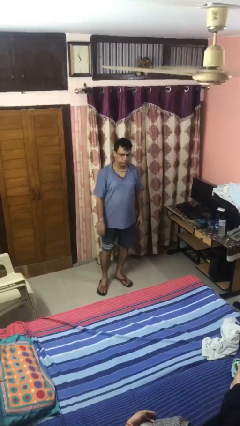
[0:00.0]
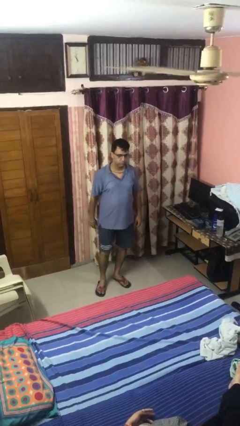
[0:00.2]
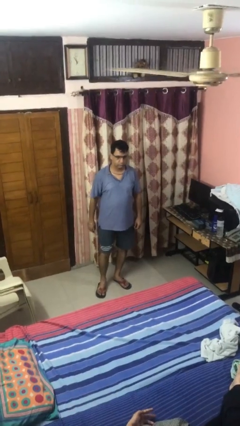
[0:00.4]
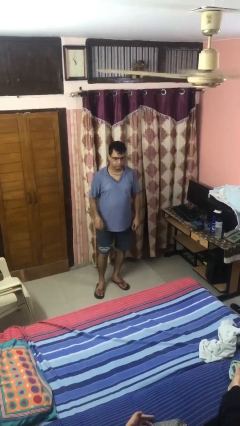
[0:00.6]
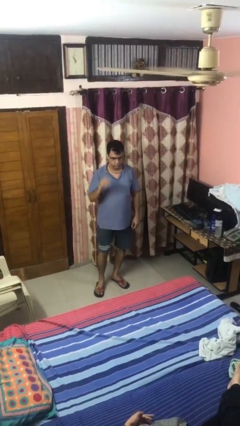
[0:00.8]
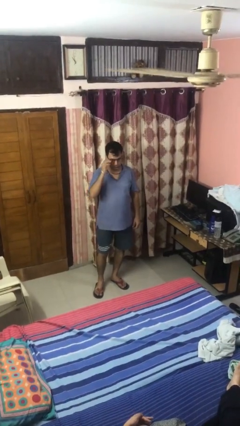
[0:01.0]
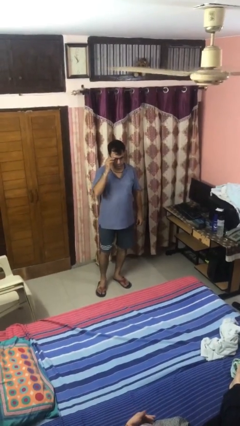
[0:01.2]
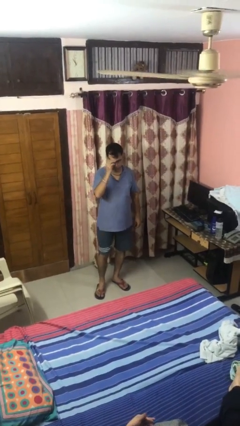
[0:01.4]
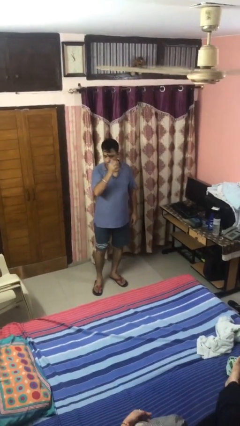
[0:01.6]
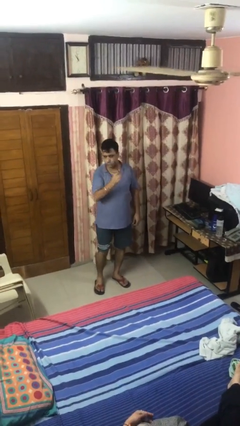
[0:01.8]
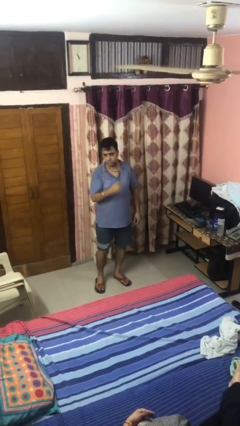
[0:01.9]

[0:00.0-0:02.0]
person takes off glasses

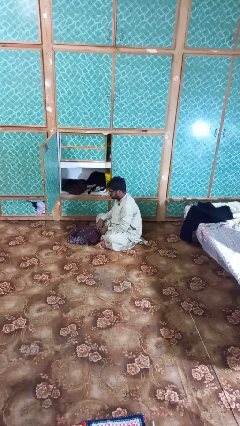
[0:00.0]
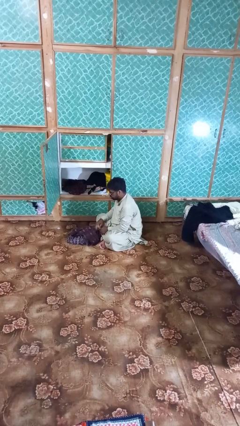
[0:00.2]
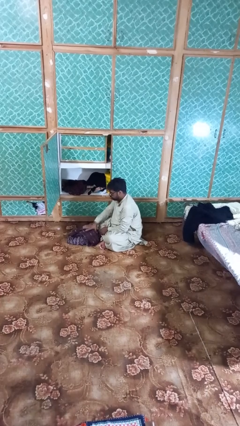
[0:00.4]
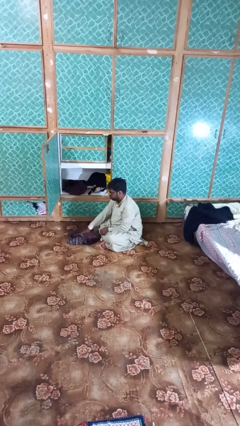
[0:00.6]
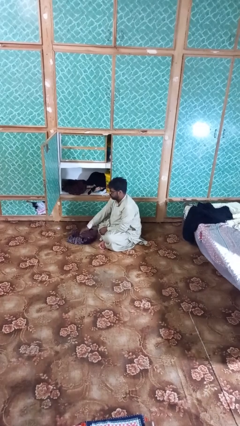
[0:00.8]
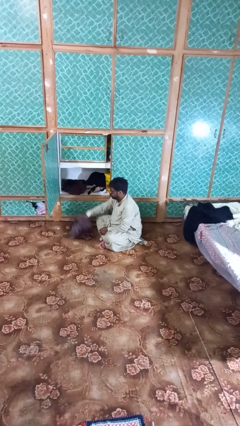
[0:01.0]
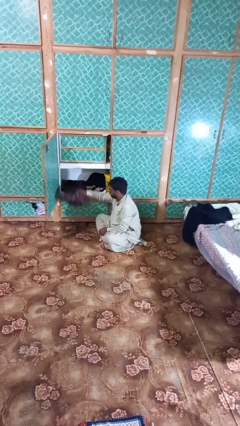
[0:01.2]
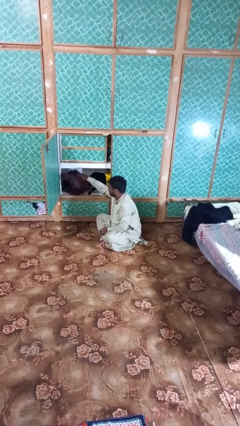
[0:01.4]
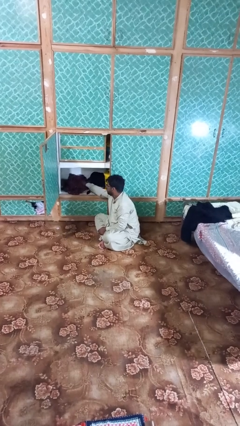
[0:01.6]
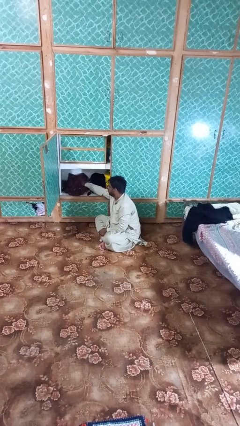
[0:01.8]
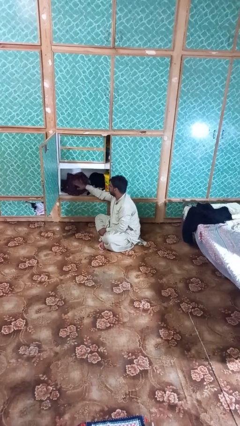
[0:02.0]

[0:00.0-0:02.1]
person puts clothes into dresser

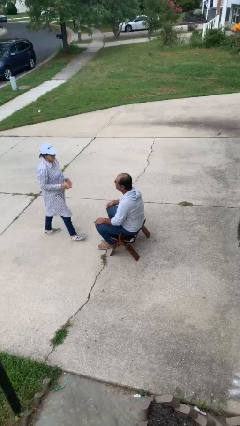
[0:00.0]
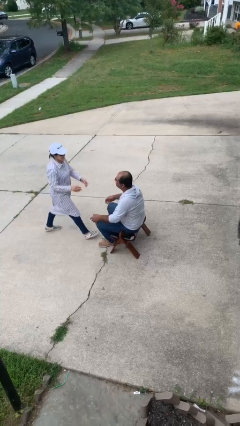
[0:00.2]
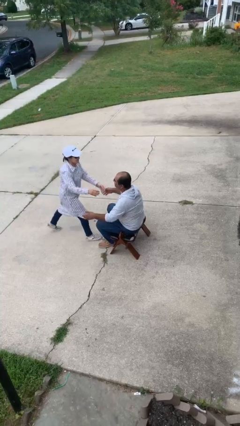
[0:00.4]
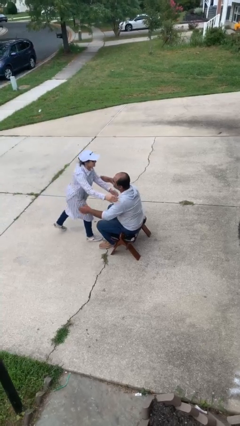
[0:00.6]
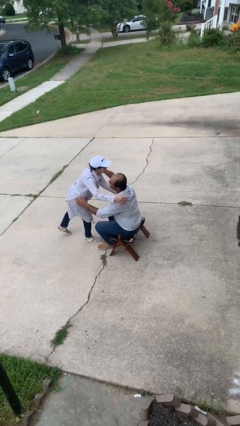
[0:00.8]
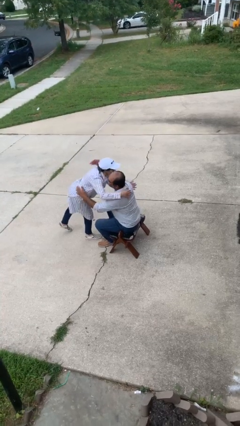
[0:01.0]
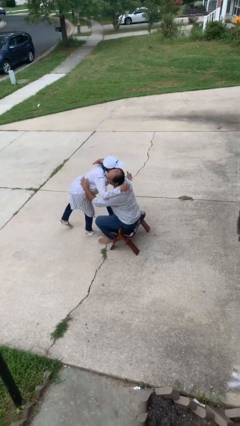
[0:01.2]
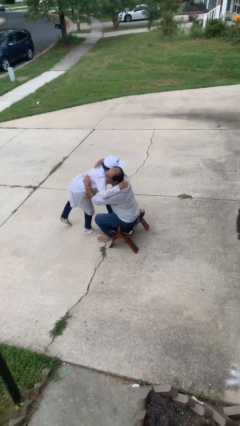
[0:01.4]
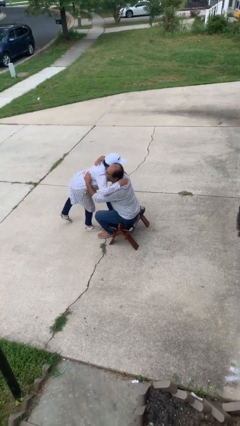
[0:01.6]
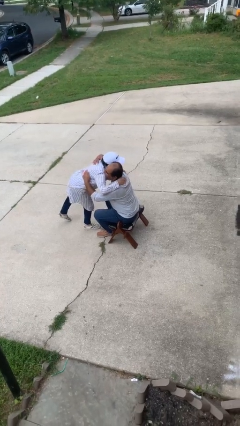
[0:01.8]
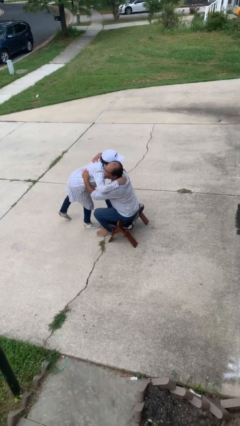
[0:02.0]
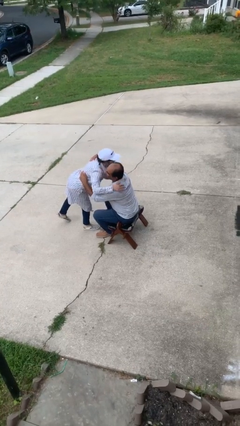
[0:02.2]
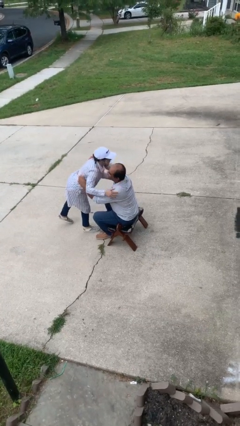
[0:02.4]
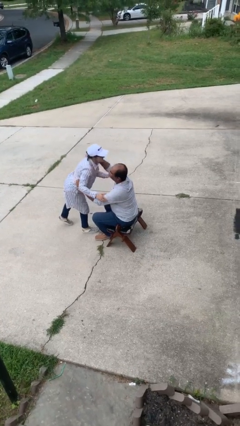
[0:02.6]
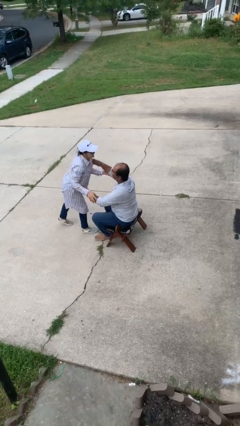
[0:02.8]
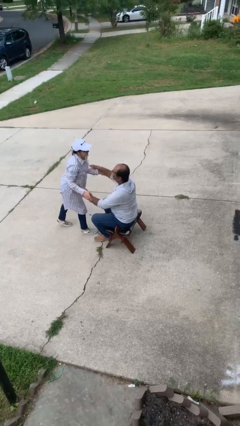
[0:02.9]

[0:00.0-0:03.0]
person embraces person

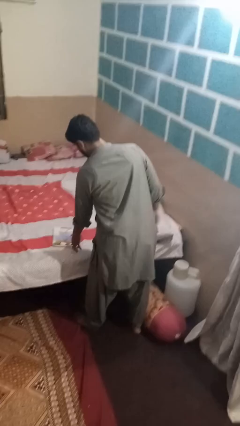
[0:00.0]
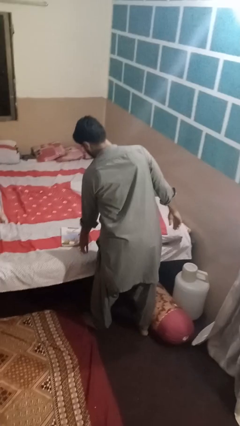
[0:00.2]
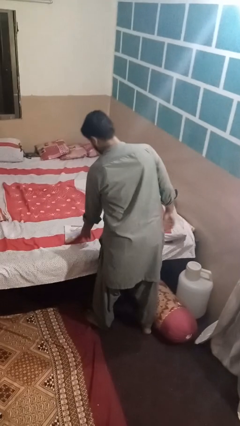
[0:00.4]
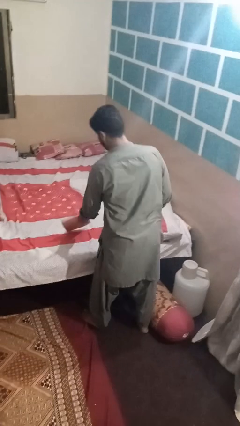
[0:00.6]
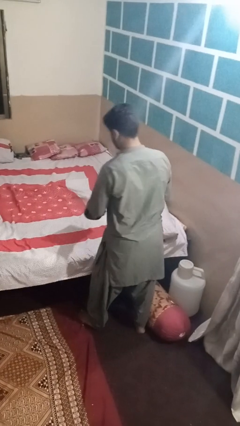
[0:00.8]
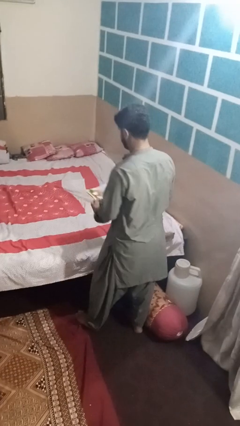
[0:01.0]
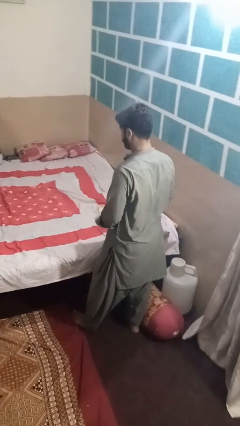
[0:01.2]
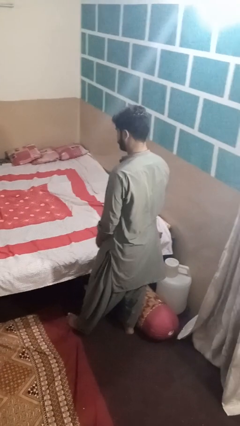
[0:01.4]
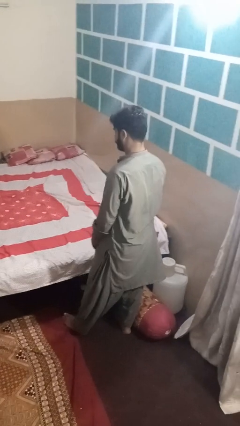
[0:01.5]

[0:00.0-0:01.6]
person picks up object from bed

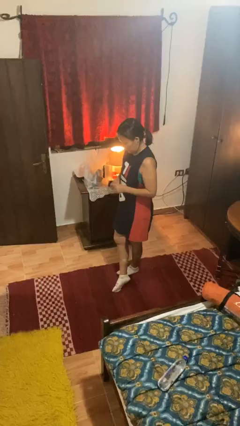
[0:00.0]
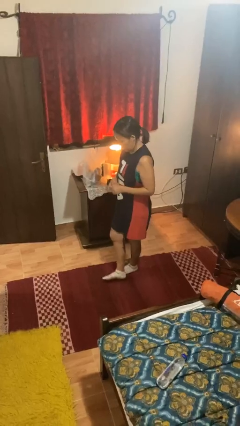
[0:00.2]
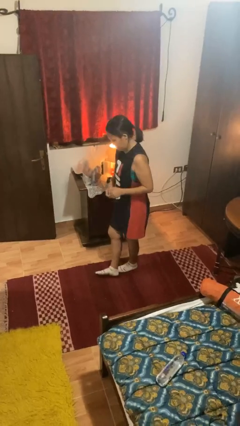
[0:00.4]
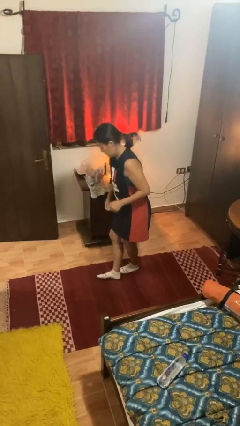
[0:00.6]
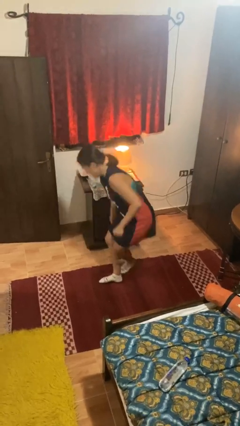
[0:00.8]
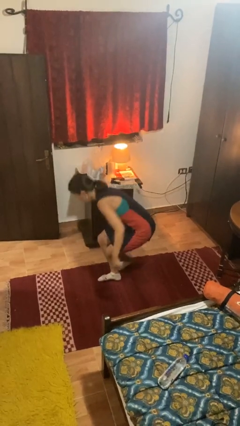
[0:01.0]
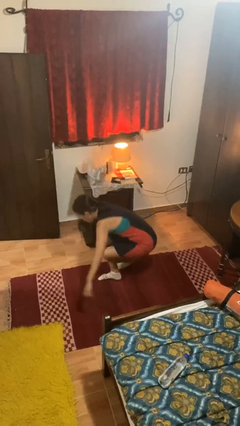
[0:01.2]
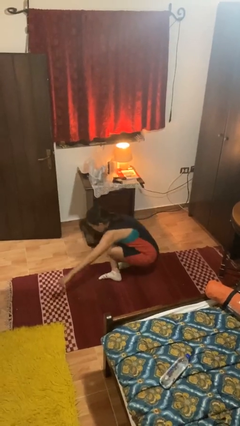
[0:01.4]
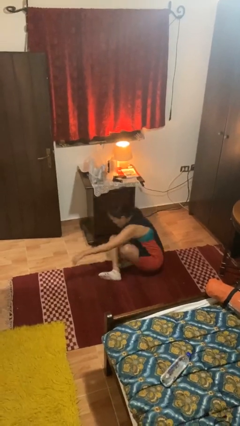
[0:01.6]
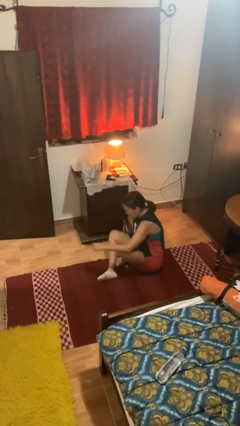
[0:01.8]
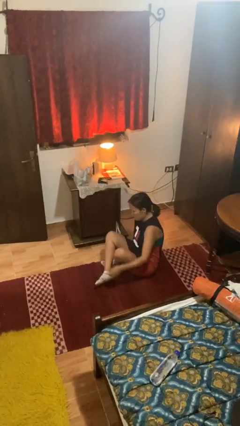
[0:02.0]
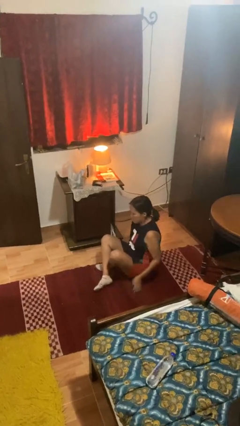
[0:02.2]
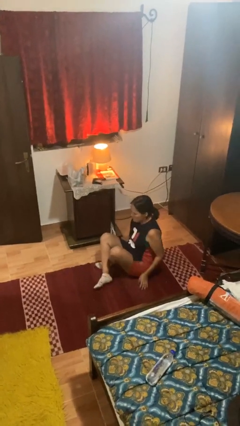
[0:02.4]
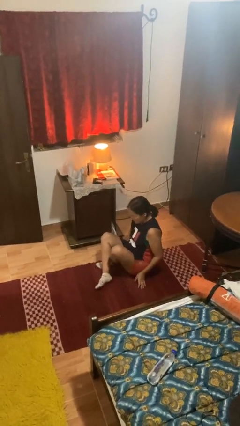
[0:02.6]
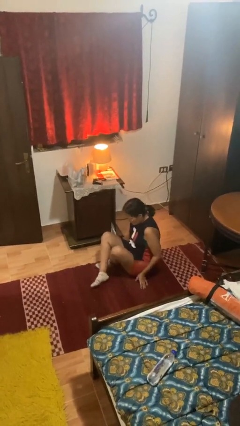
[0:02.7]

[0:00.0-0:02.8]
person sits crisscross

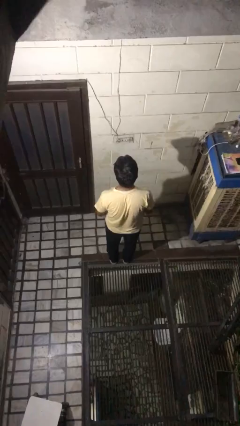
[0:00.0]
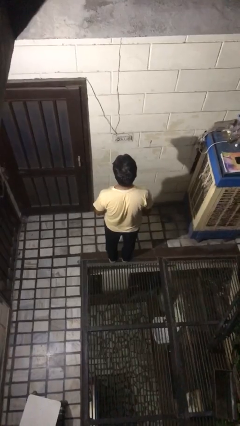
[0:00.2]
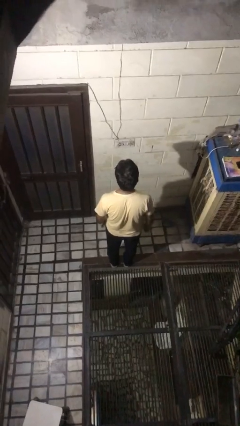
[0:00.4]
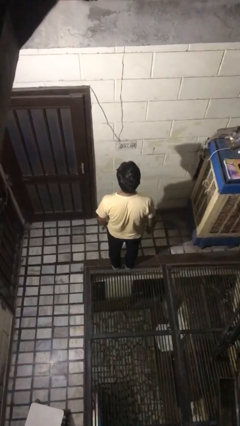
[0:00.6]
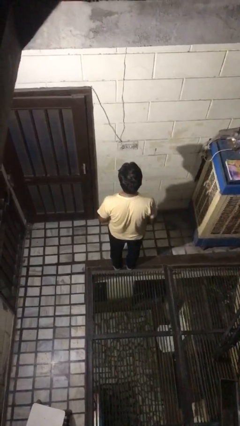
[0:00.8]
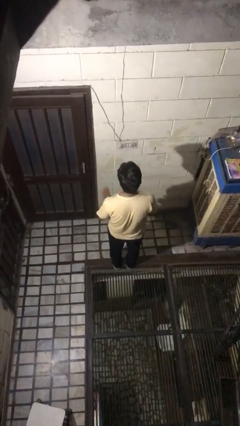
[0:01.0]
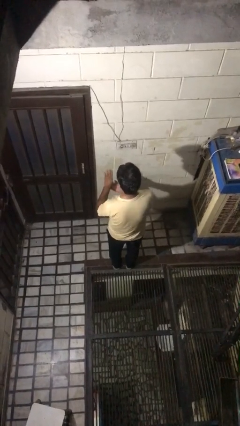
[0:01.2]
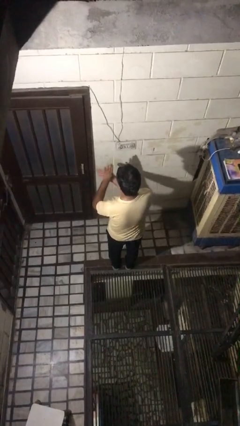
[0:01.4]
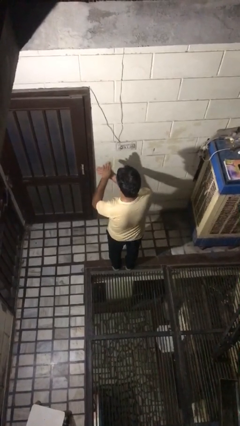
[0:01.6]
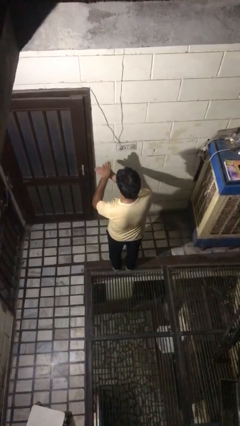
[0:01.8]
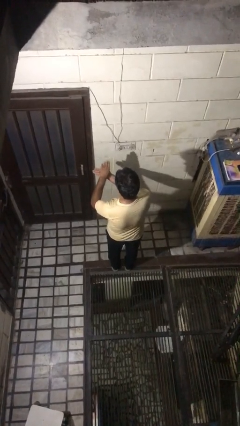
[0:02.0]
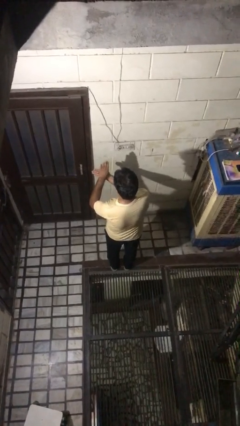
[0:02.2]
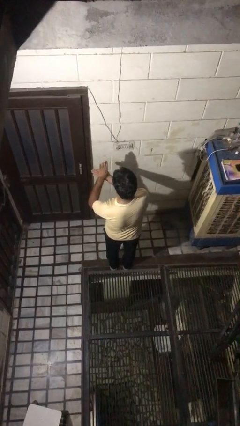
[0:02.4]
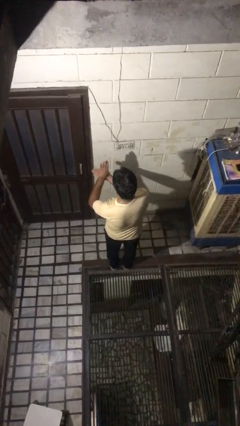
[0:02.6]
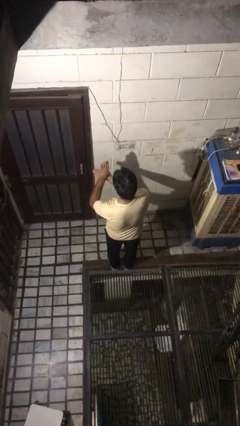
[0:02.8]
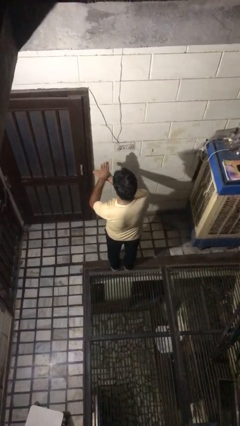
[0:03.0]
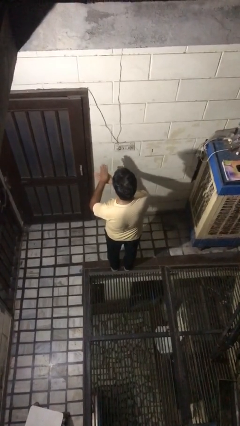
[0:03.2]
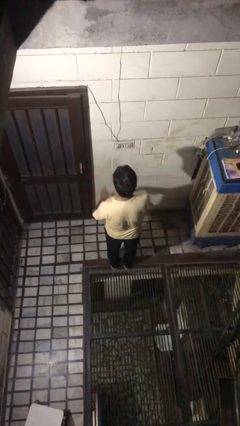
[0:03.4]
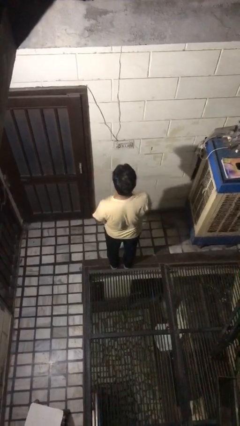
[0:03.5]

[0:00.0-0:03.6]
person gestures number four

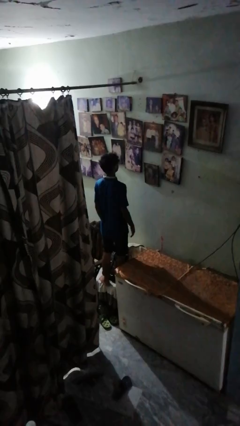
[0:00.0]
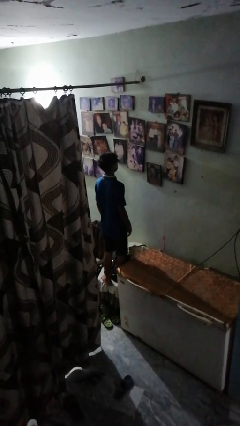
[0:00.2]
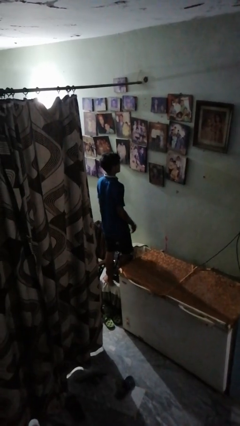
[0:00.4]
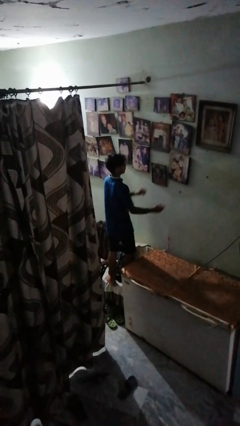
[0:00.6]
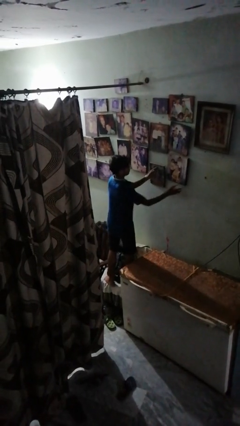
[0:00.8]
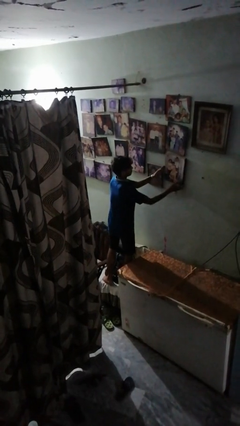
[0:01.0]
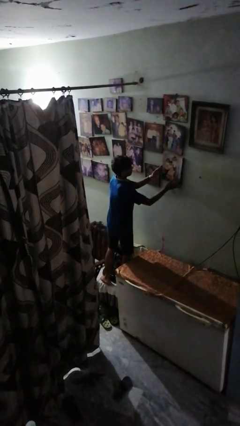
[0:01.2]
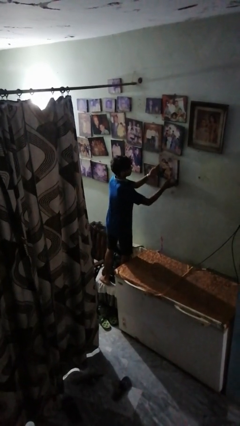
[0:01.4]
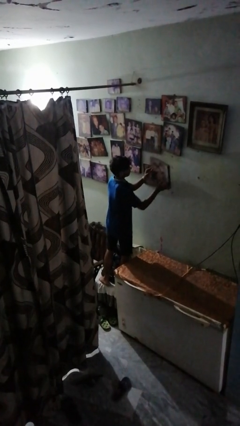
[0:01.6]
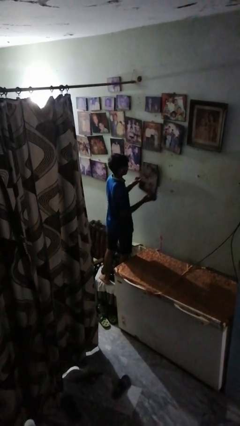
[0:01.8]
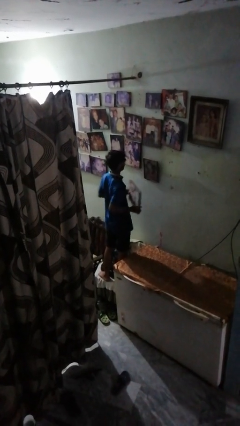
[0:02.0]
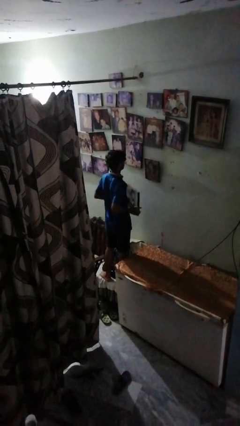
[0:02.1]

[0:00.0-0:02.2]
person takes down picture frame
